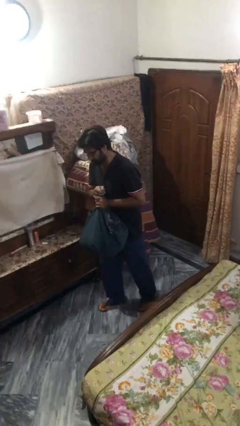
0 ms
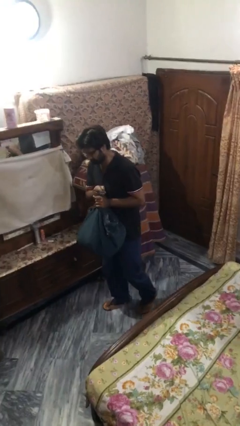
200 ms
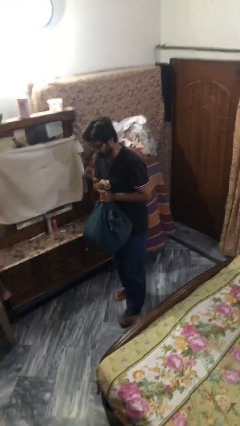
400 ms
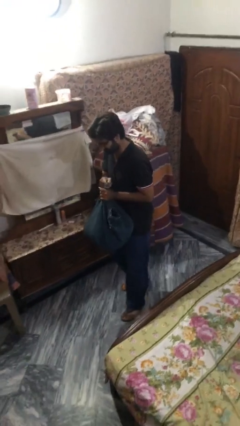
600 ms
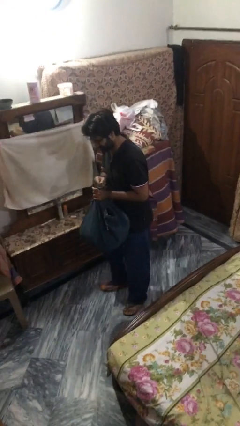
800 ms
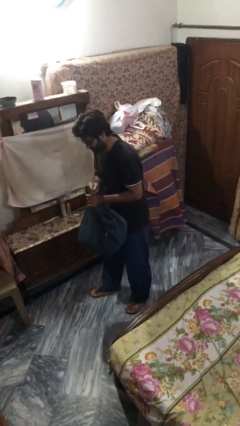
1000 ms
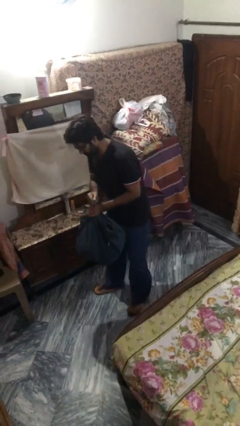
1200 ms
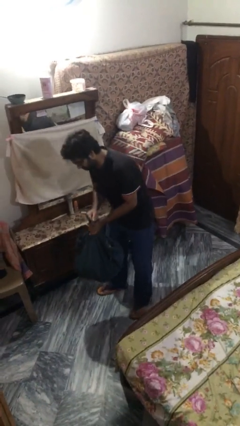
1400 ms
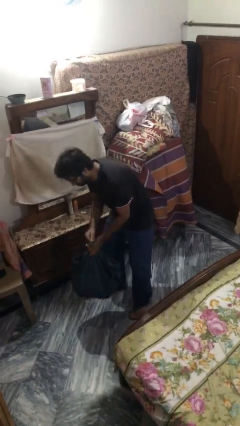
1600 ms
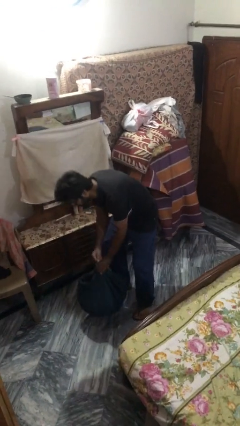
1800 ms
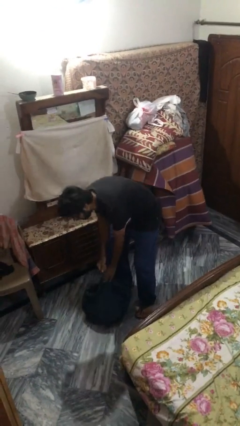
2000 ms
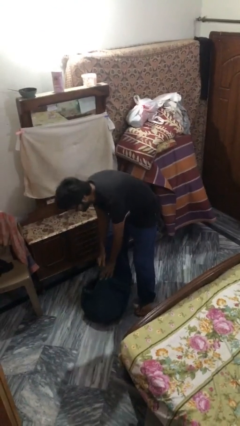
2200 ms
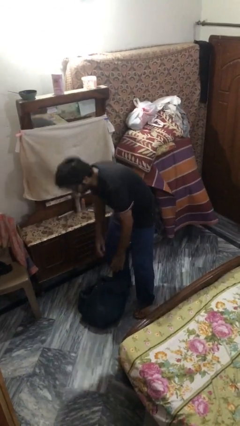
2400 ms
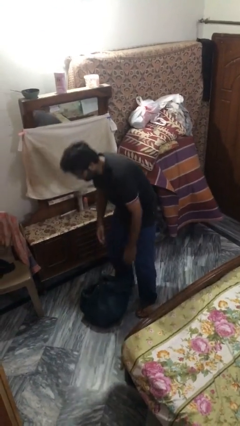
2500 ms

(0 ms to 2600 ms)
person puts down object on floor

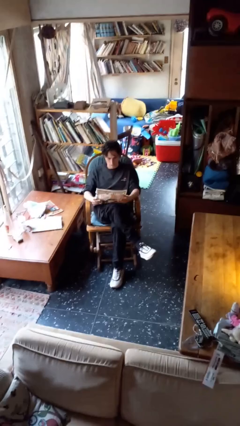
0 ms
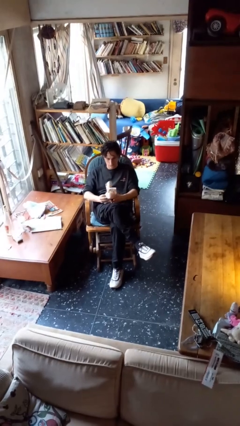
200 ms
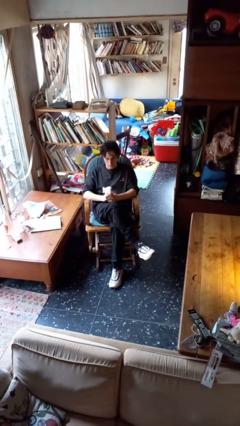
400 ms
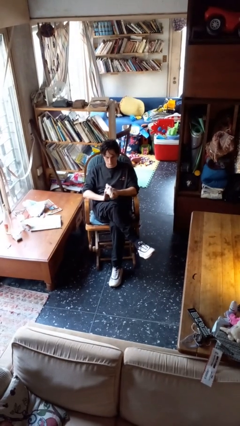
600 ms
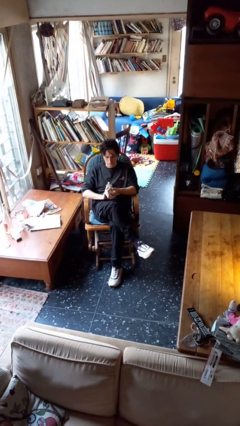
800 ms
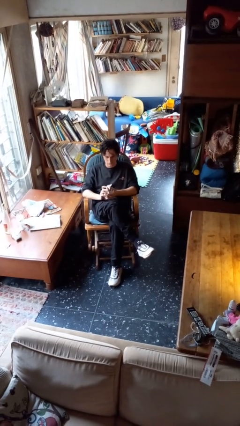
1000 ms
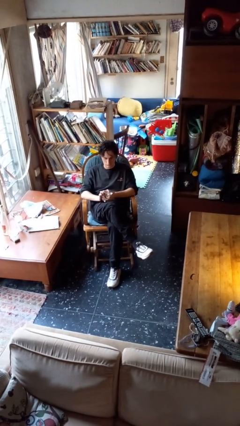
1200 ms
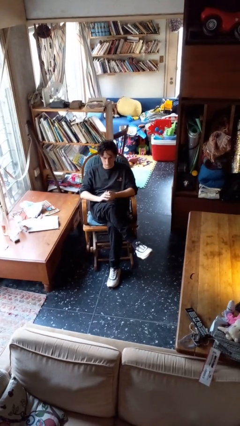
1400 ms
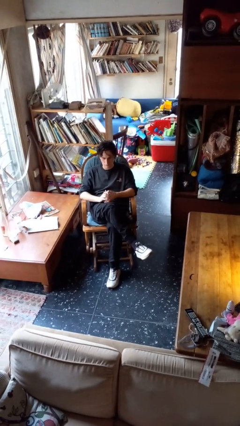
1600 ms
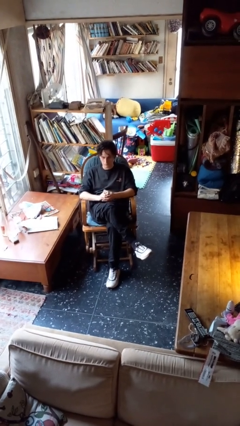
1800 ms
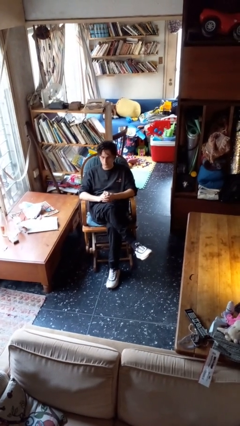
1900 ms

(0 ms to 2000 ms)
person crumples paper

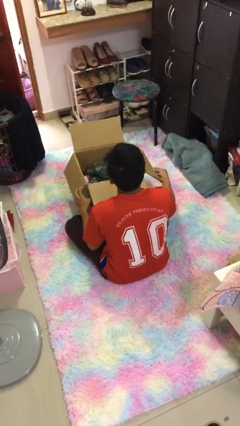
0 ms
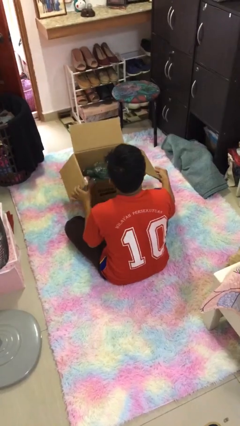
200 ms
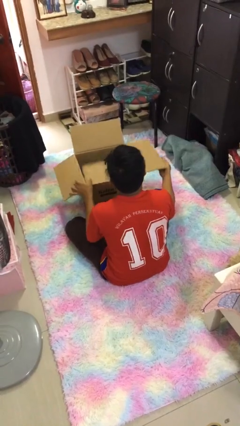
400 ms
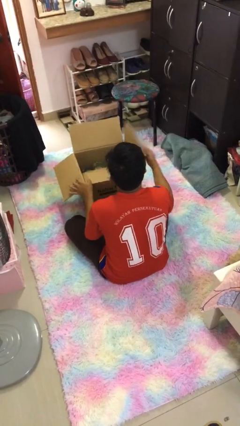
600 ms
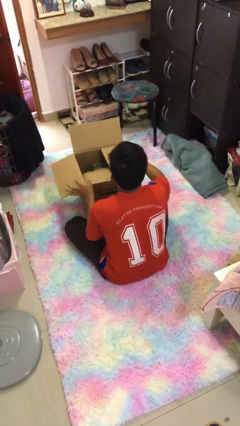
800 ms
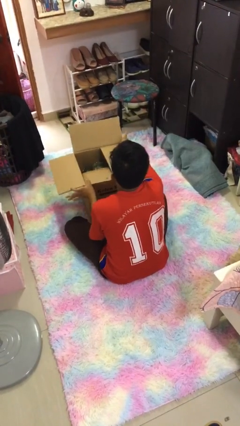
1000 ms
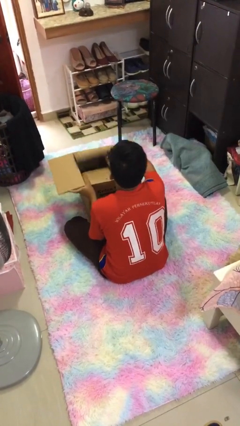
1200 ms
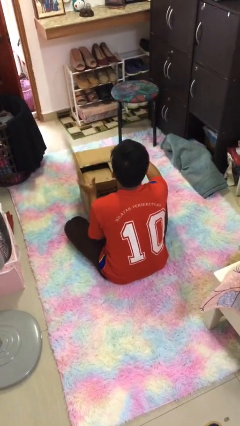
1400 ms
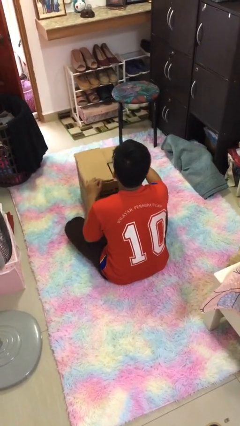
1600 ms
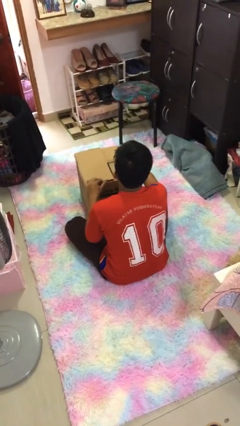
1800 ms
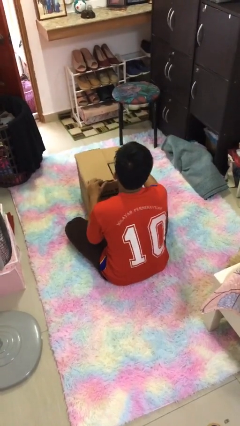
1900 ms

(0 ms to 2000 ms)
person closes box

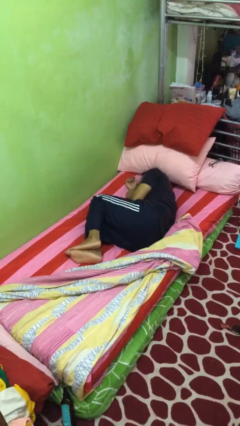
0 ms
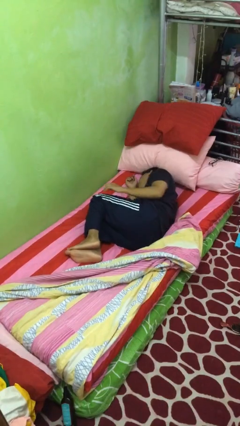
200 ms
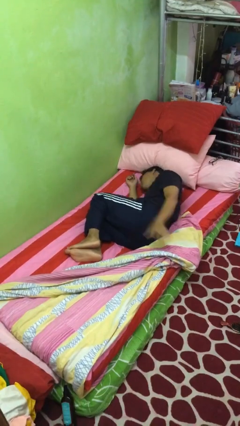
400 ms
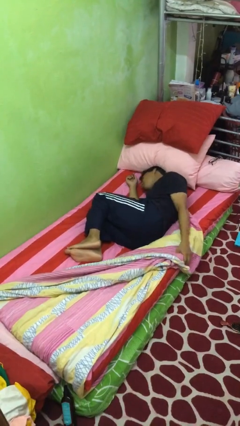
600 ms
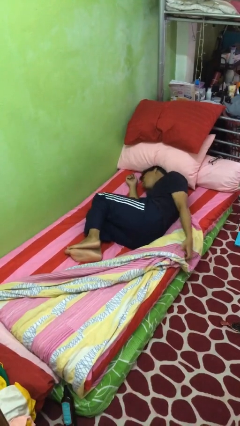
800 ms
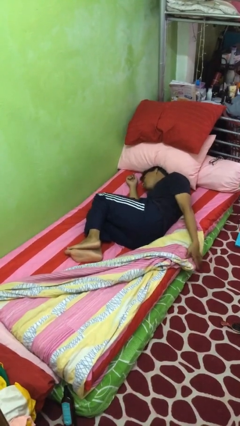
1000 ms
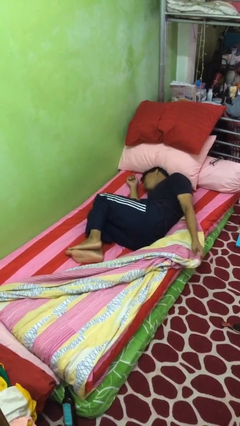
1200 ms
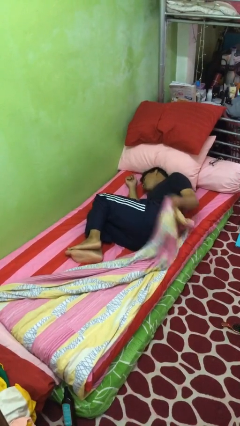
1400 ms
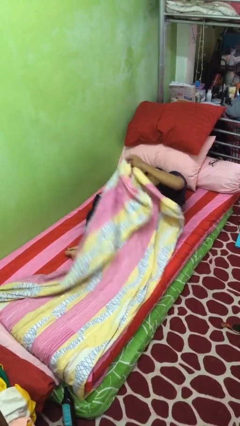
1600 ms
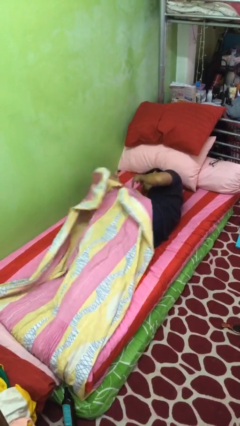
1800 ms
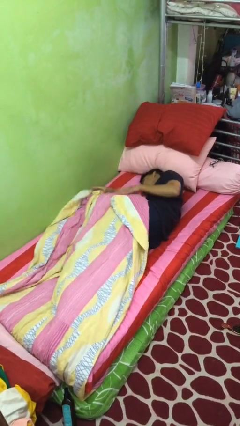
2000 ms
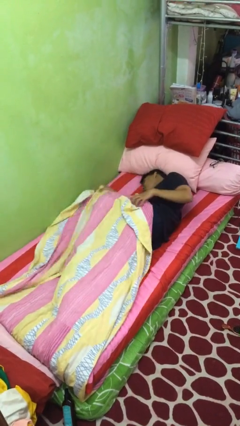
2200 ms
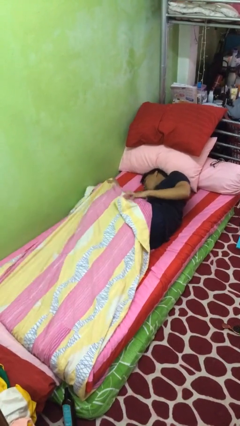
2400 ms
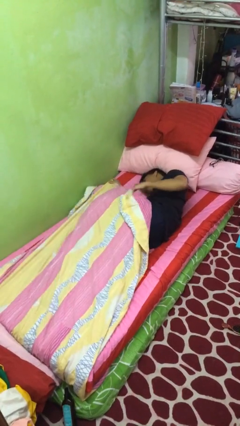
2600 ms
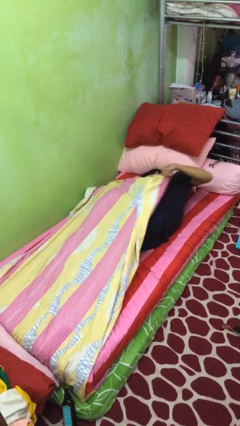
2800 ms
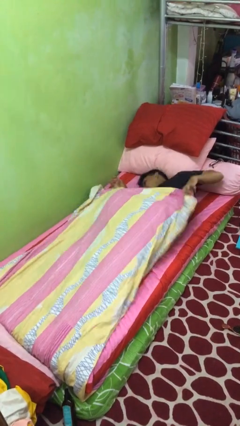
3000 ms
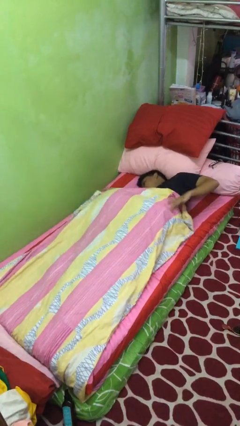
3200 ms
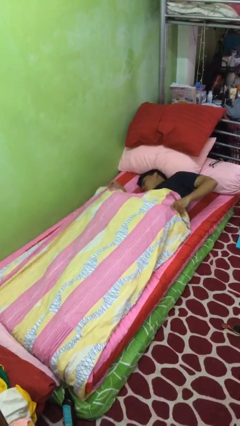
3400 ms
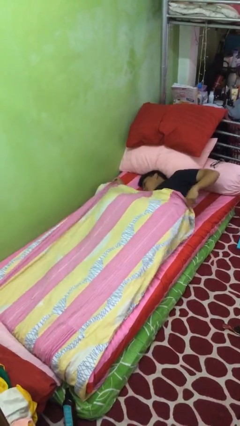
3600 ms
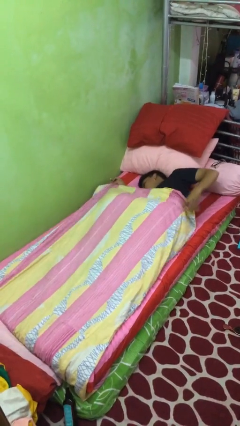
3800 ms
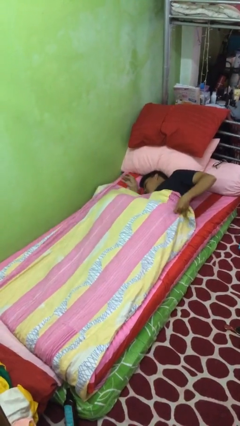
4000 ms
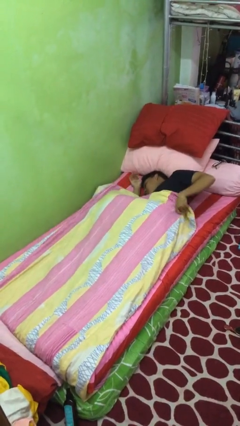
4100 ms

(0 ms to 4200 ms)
person covers with bedsheets

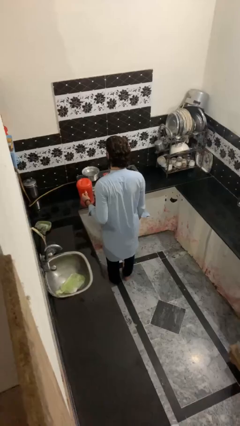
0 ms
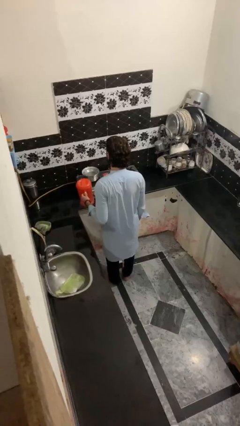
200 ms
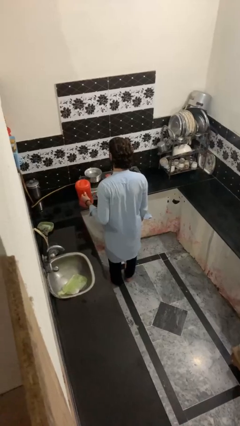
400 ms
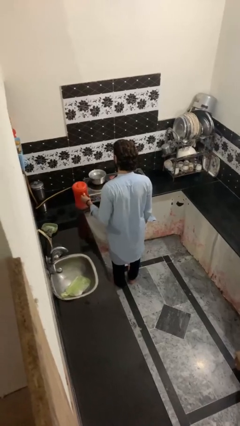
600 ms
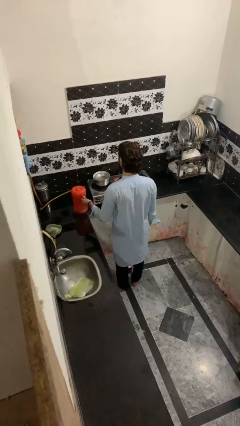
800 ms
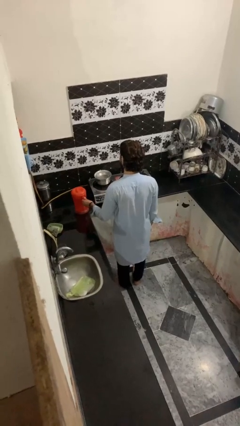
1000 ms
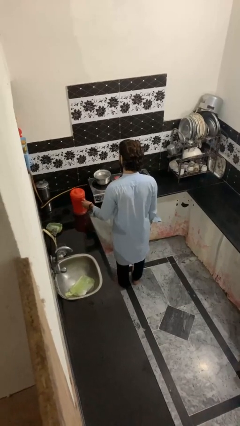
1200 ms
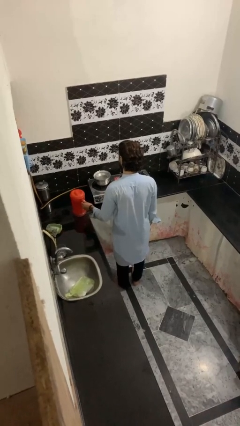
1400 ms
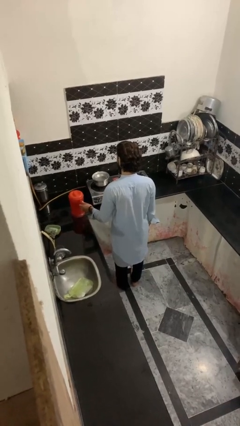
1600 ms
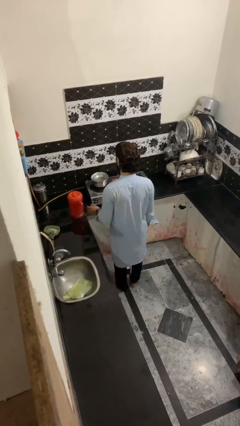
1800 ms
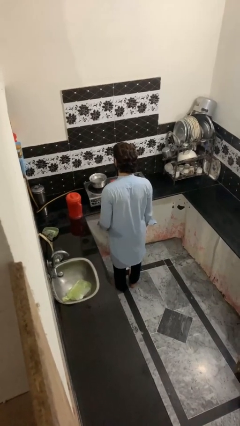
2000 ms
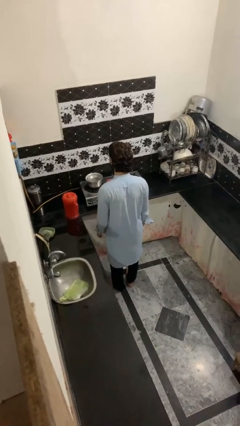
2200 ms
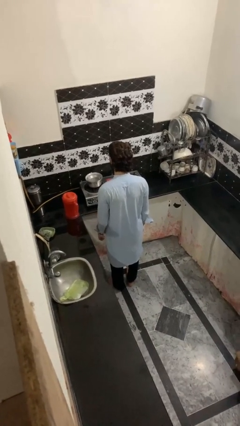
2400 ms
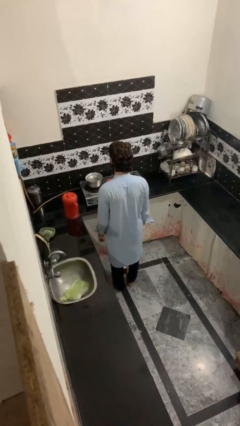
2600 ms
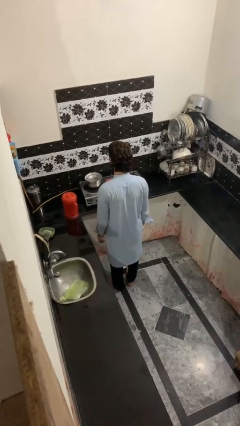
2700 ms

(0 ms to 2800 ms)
person puts down object on countertop

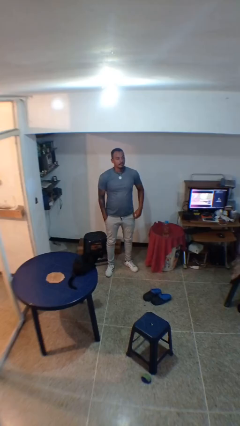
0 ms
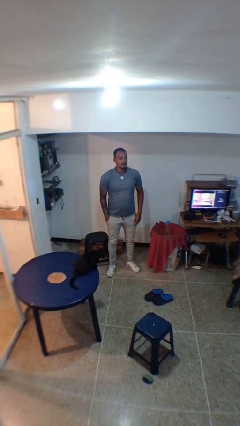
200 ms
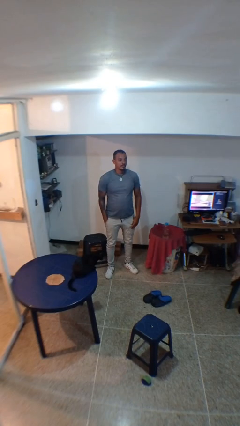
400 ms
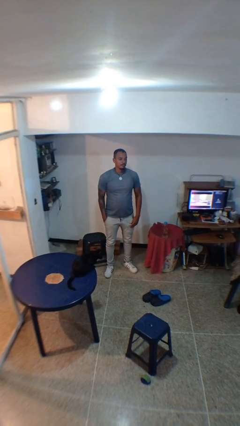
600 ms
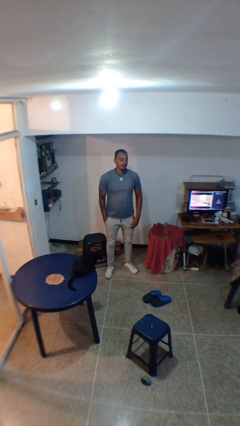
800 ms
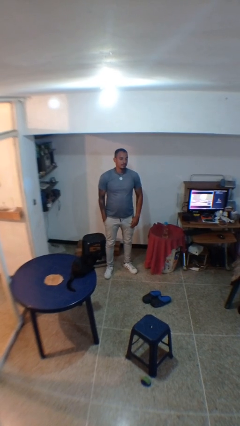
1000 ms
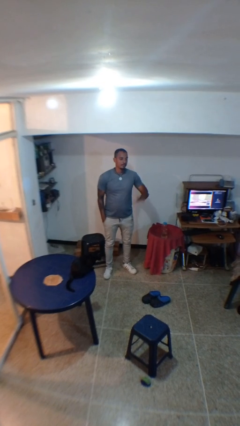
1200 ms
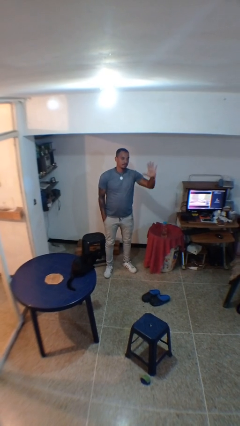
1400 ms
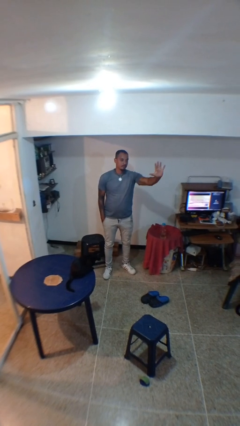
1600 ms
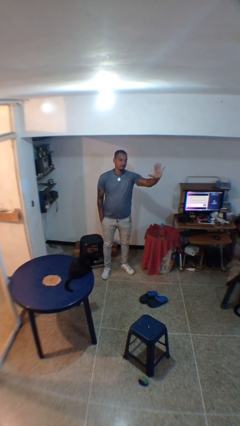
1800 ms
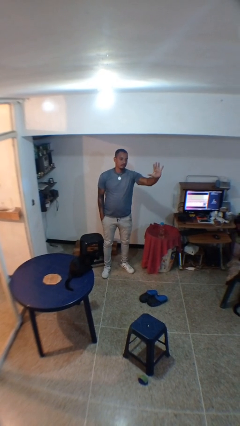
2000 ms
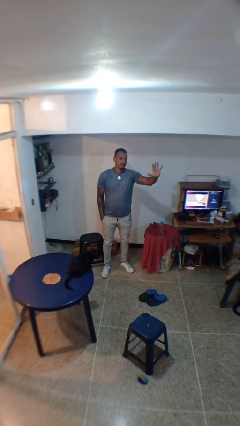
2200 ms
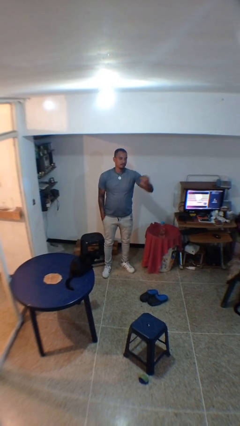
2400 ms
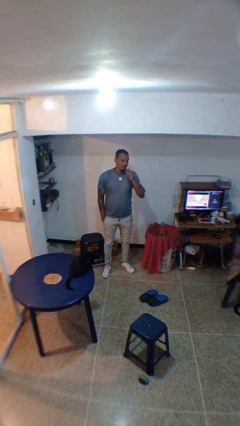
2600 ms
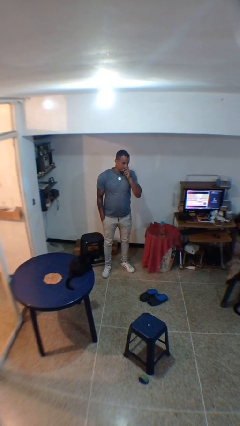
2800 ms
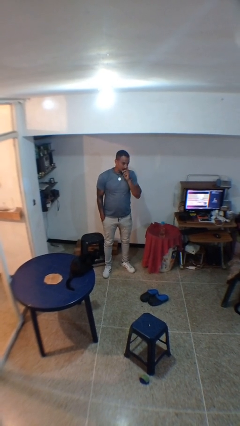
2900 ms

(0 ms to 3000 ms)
person gestures number five

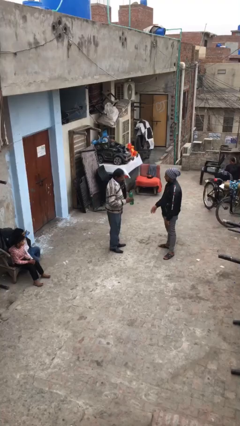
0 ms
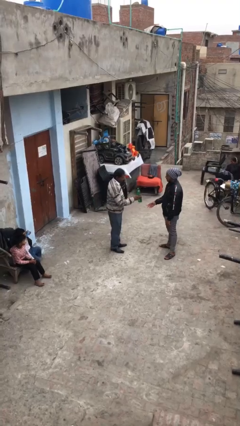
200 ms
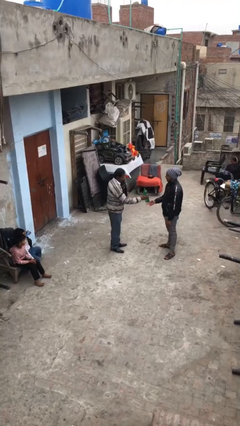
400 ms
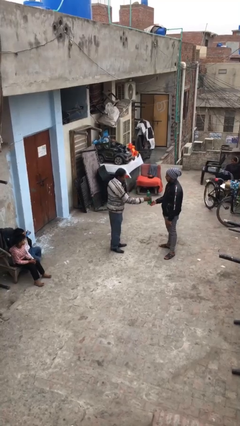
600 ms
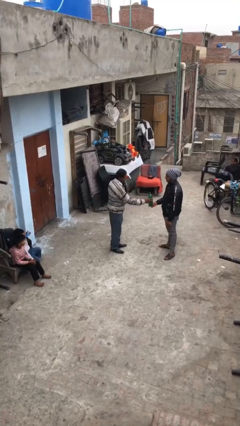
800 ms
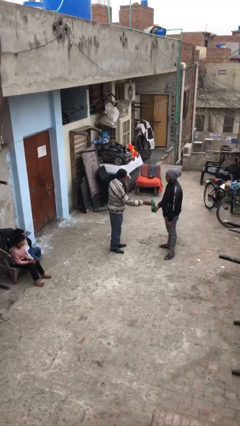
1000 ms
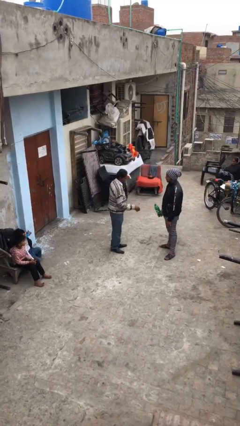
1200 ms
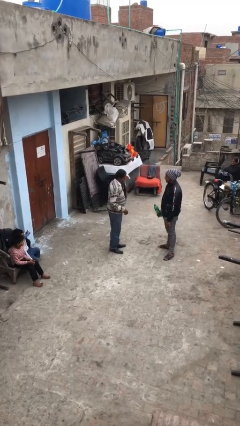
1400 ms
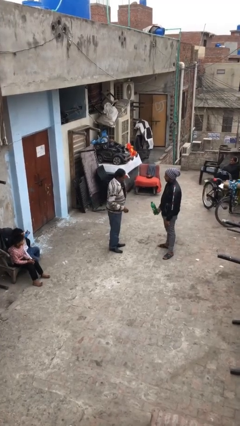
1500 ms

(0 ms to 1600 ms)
person transfers object to person
